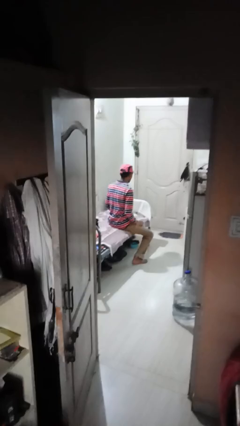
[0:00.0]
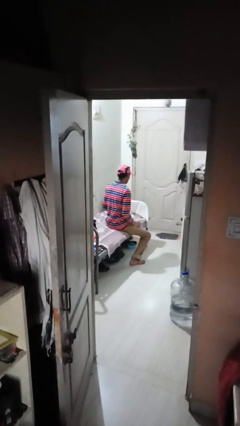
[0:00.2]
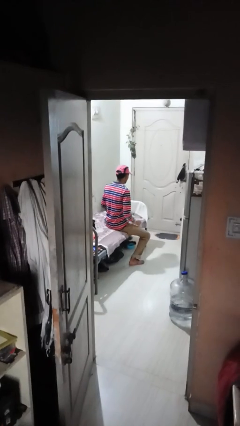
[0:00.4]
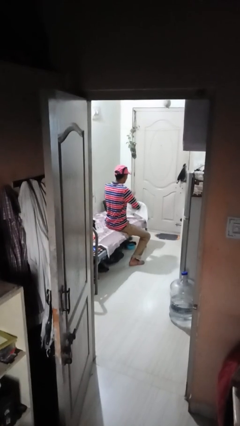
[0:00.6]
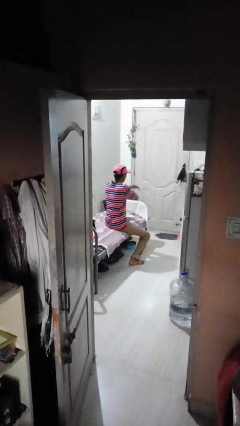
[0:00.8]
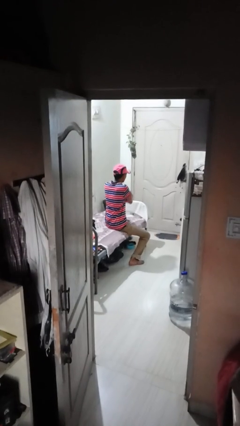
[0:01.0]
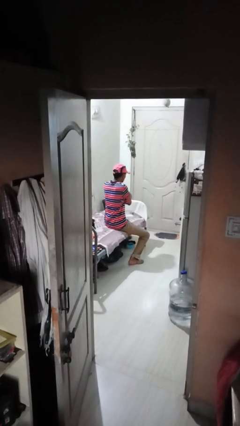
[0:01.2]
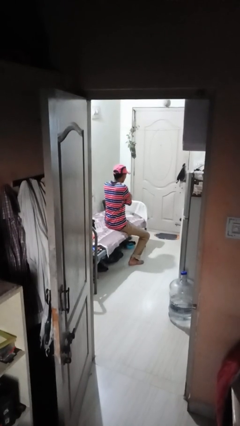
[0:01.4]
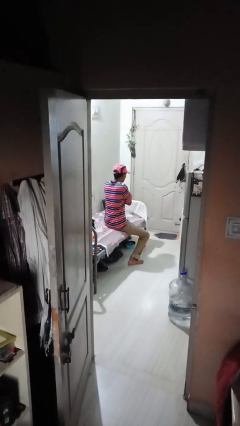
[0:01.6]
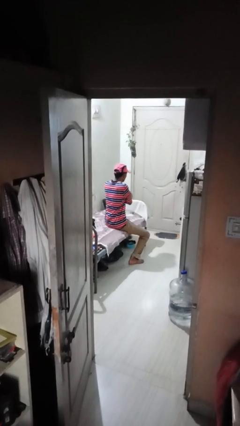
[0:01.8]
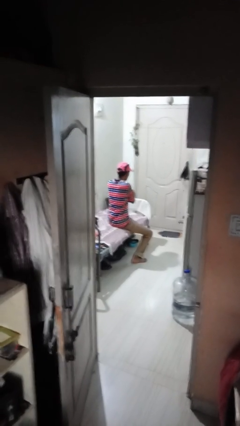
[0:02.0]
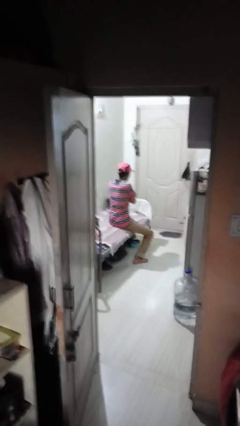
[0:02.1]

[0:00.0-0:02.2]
person crosses arms

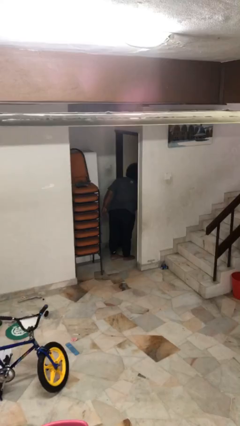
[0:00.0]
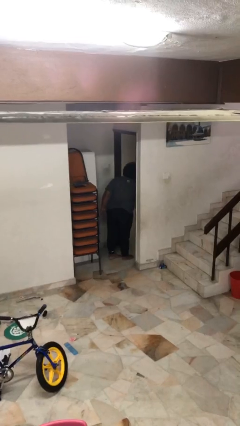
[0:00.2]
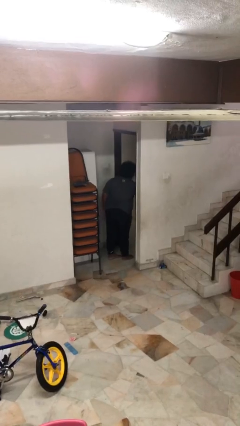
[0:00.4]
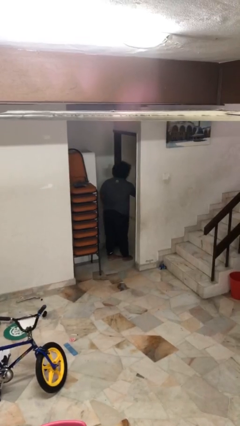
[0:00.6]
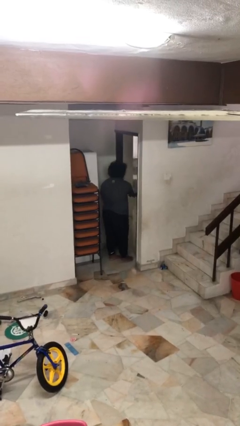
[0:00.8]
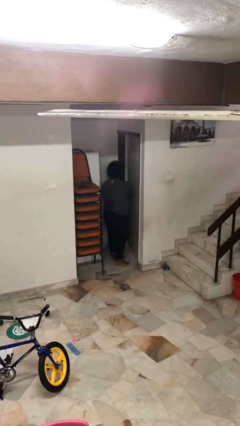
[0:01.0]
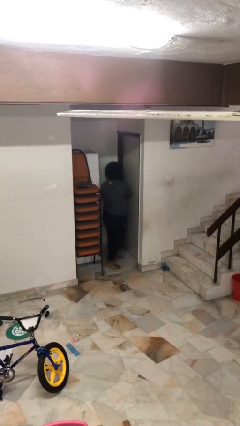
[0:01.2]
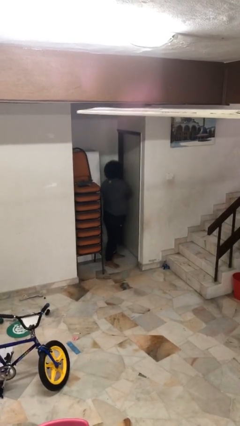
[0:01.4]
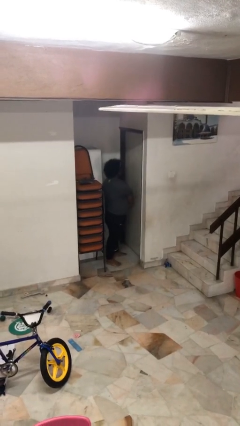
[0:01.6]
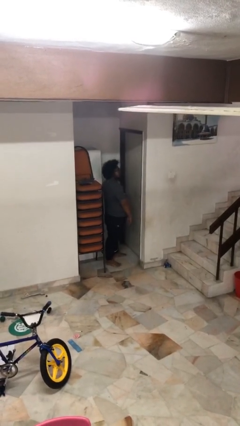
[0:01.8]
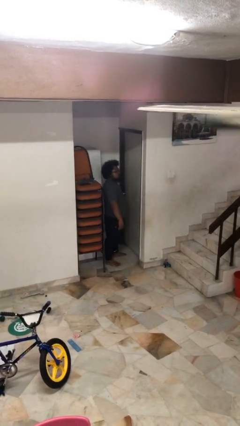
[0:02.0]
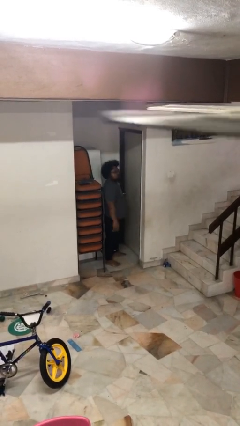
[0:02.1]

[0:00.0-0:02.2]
person closes facility door

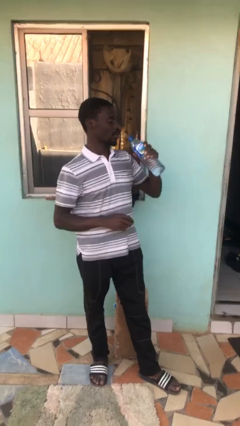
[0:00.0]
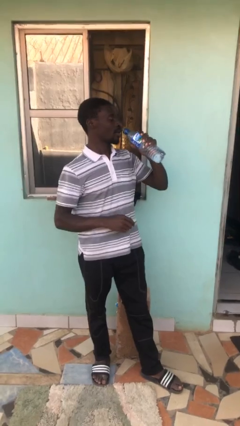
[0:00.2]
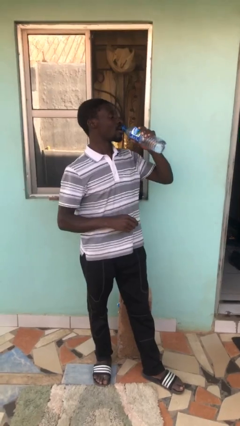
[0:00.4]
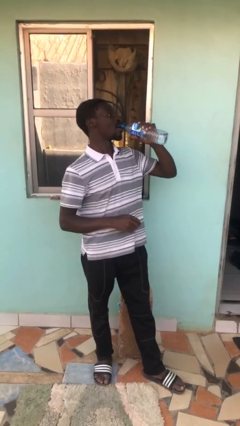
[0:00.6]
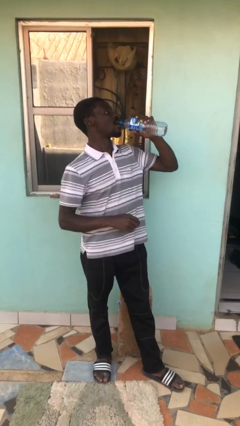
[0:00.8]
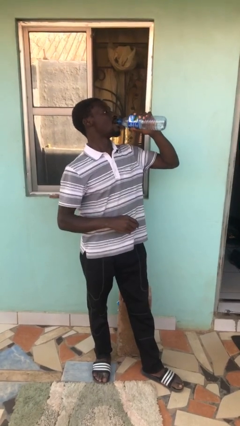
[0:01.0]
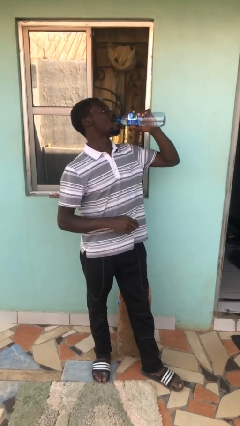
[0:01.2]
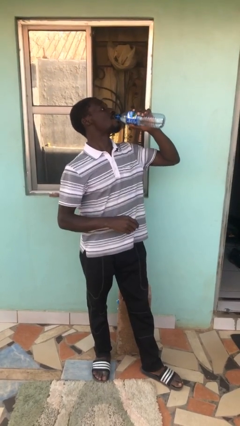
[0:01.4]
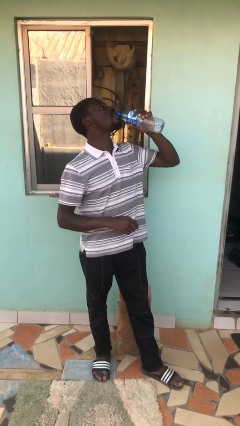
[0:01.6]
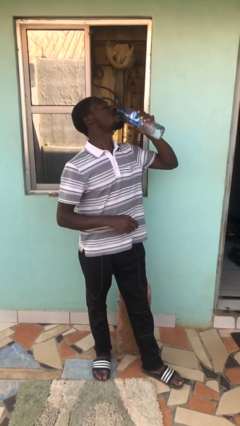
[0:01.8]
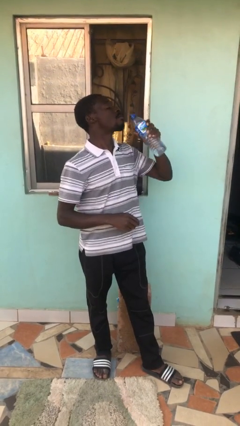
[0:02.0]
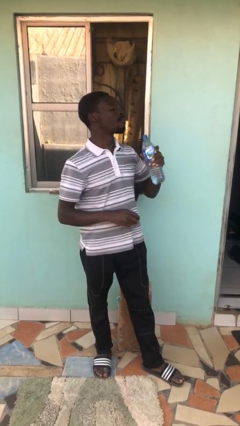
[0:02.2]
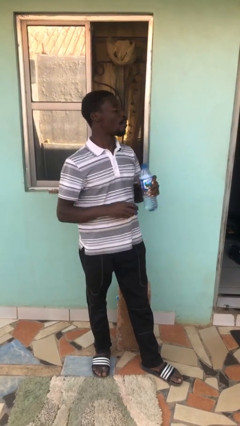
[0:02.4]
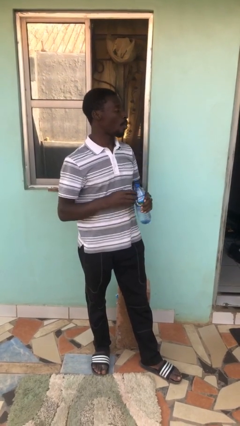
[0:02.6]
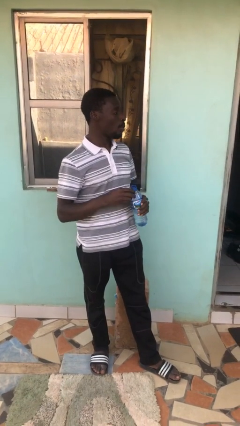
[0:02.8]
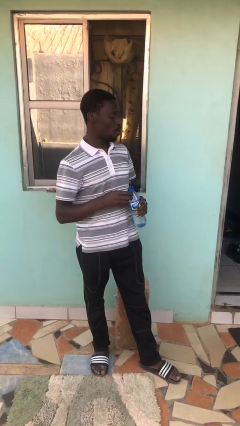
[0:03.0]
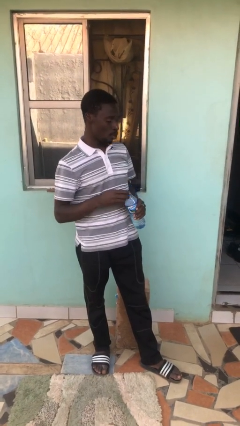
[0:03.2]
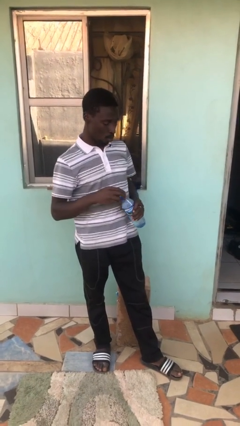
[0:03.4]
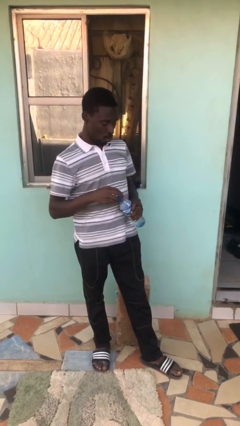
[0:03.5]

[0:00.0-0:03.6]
person drinks from bottle

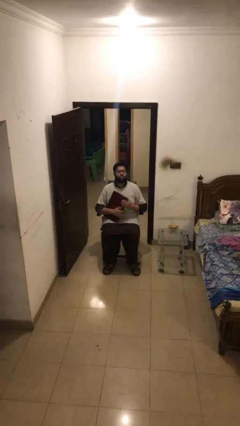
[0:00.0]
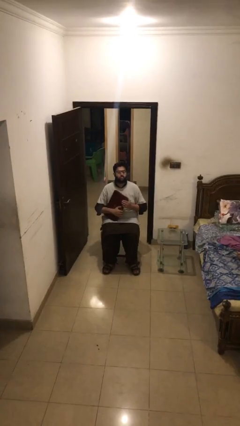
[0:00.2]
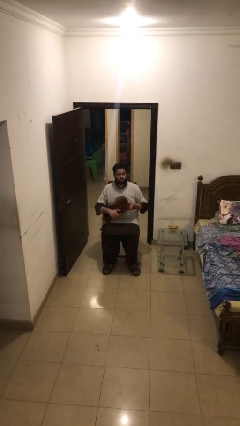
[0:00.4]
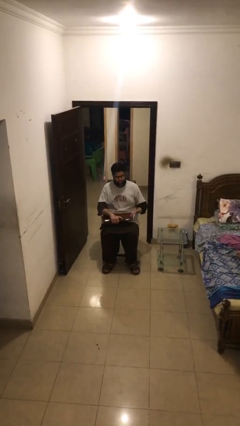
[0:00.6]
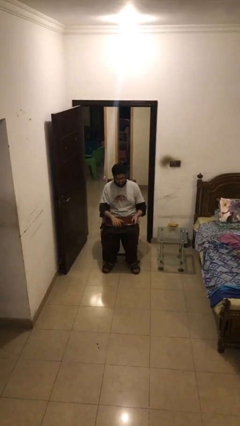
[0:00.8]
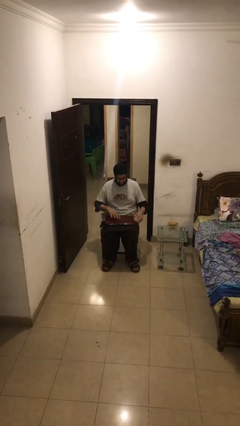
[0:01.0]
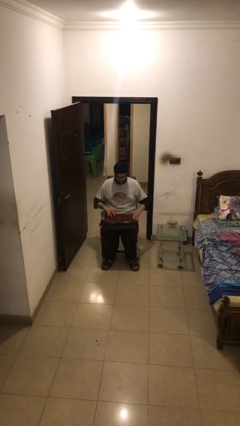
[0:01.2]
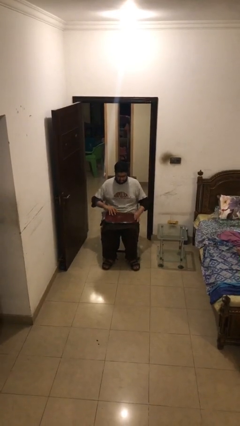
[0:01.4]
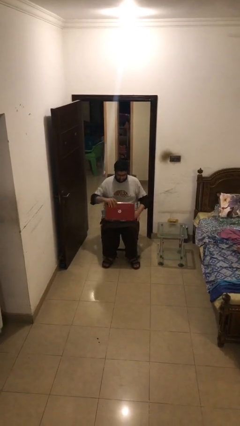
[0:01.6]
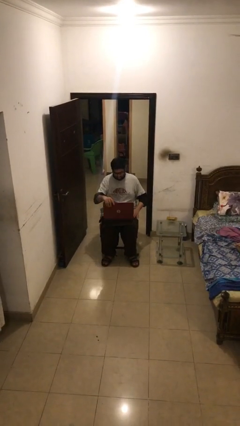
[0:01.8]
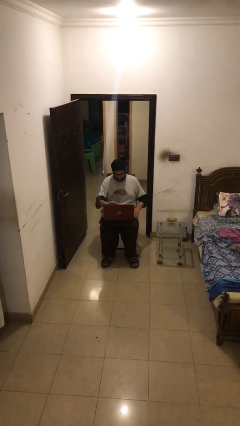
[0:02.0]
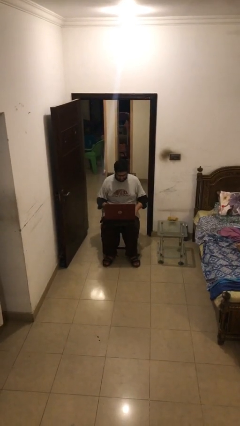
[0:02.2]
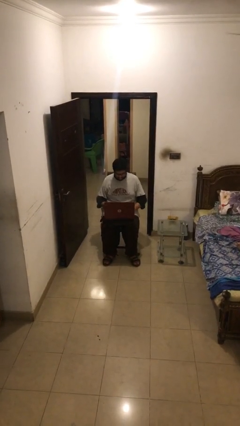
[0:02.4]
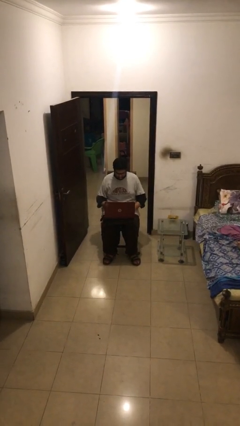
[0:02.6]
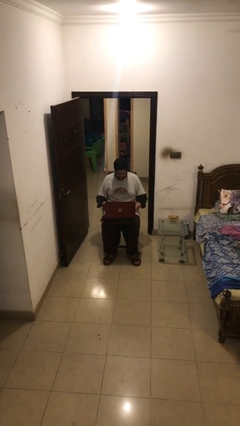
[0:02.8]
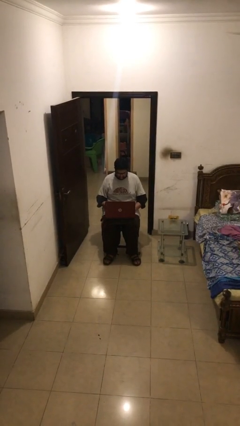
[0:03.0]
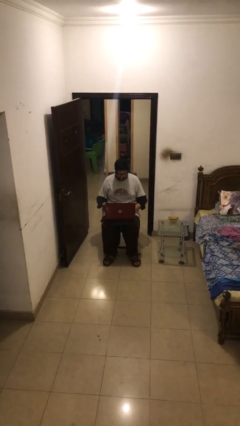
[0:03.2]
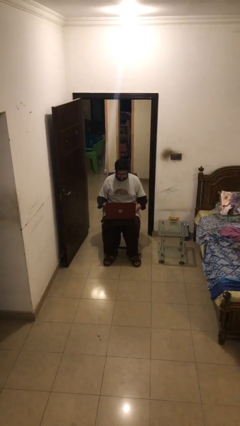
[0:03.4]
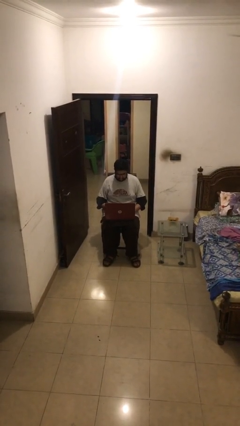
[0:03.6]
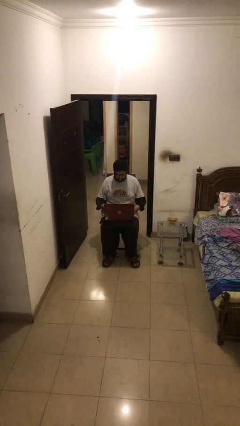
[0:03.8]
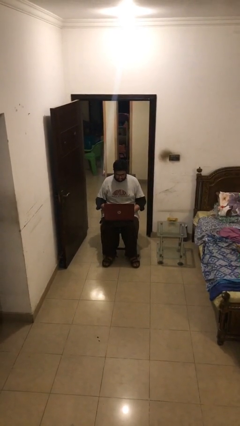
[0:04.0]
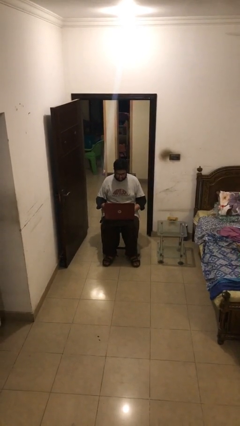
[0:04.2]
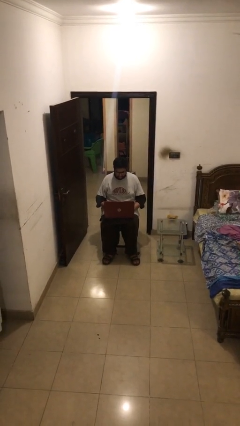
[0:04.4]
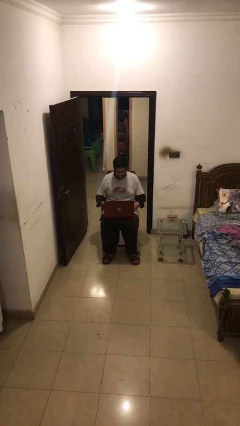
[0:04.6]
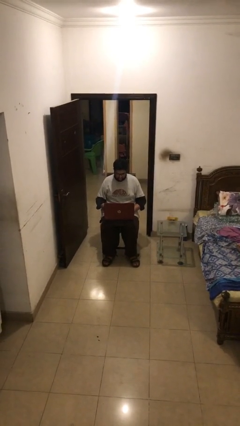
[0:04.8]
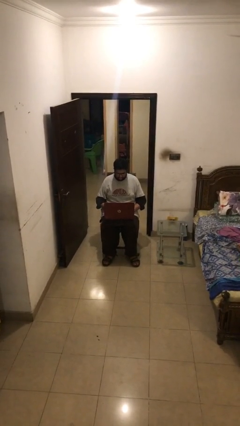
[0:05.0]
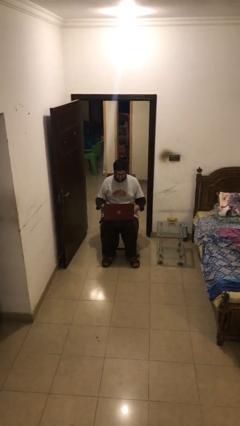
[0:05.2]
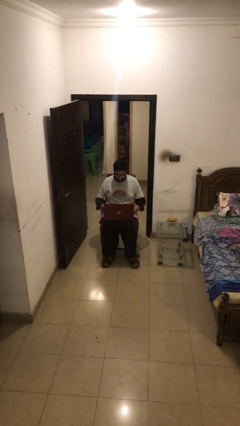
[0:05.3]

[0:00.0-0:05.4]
person interacts with laptop

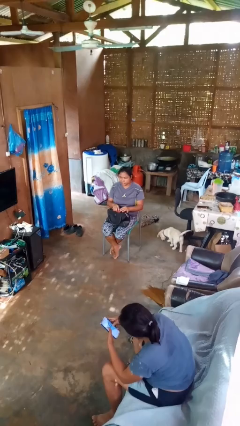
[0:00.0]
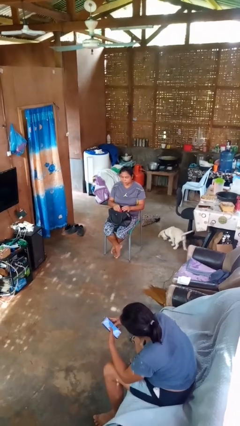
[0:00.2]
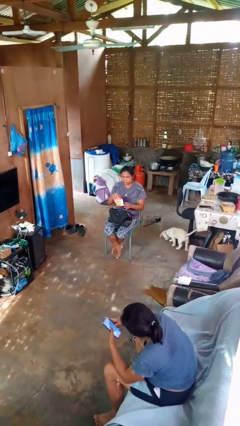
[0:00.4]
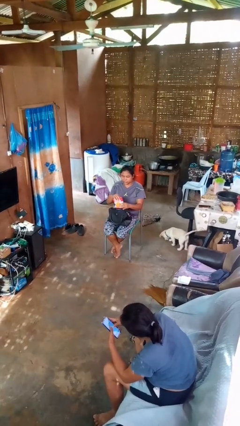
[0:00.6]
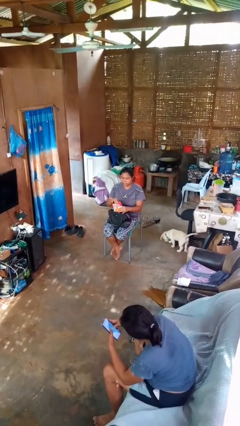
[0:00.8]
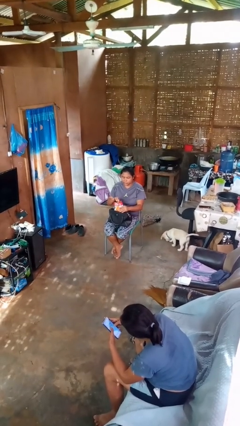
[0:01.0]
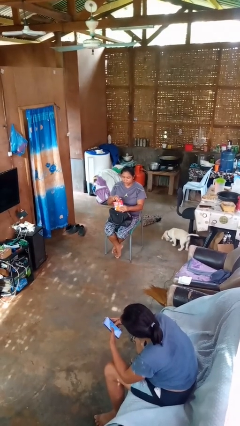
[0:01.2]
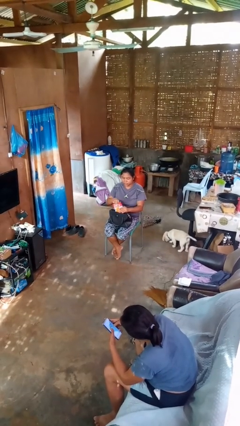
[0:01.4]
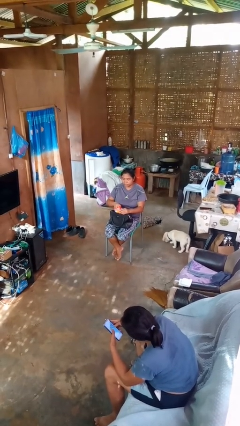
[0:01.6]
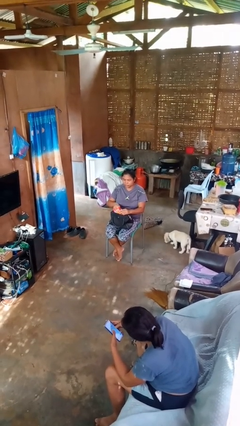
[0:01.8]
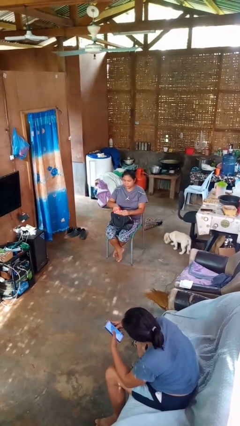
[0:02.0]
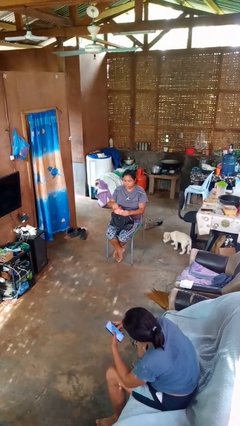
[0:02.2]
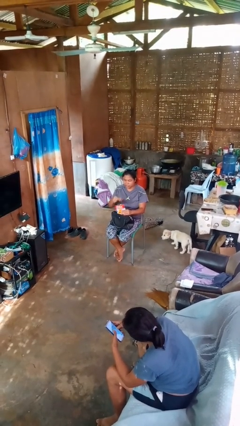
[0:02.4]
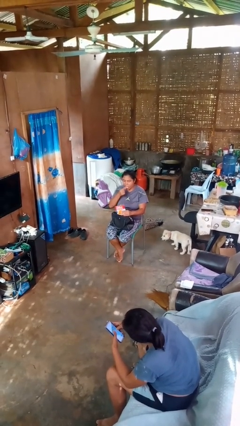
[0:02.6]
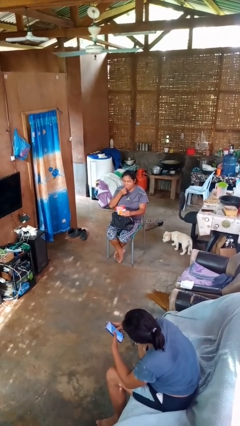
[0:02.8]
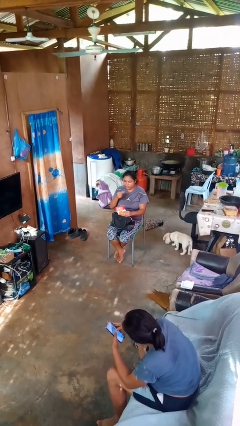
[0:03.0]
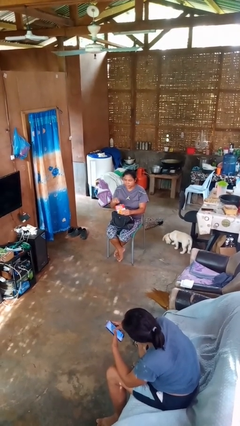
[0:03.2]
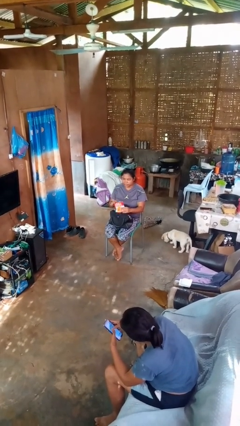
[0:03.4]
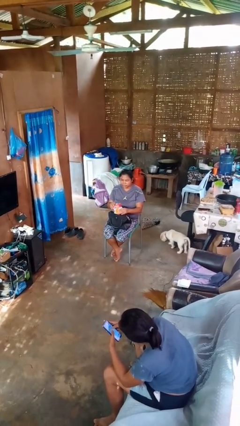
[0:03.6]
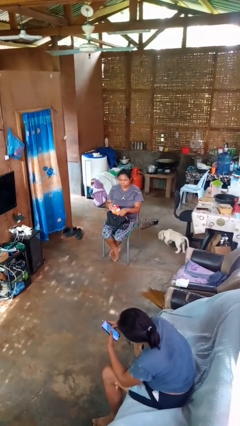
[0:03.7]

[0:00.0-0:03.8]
person eats snack from bag

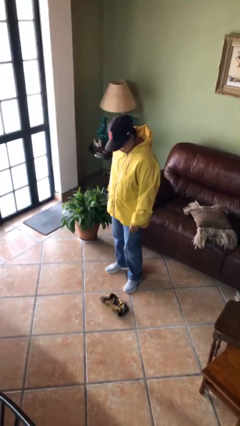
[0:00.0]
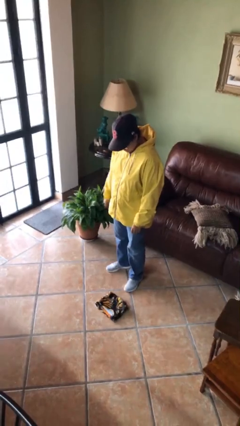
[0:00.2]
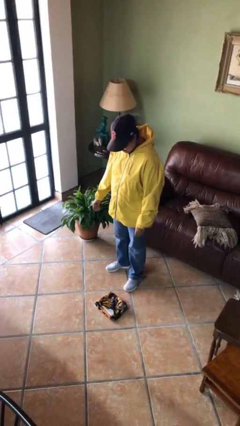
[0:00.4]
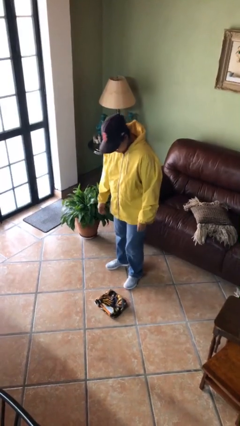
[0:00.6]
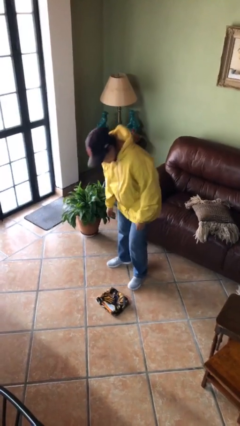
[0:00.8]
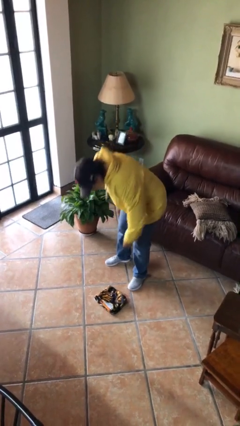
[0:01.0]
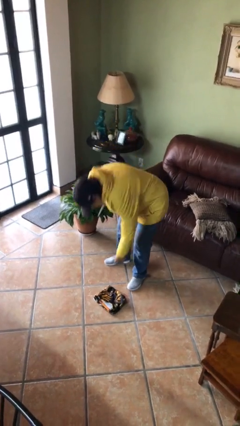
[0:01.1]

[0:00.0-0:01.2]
person drops object
